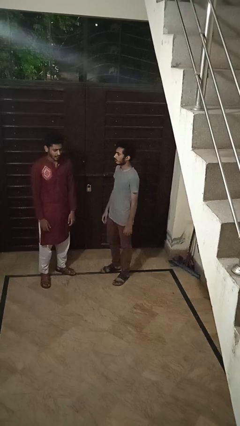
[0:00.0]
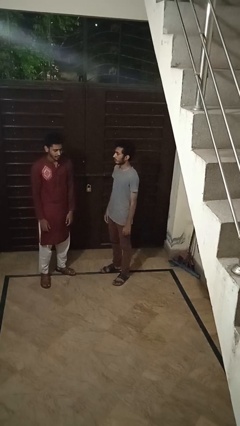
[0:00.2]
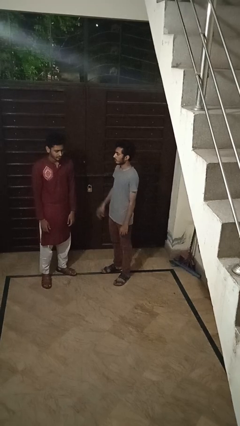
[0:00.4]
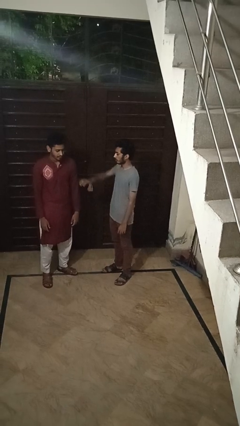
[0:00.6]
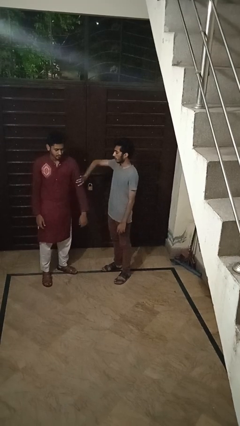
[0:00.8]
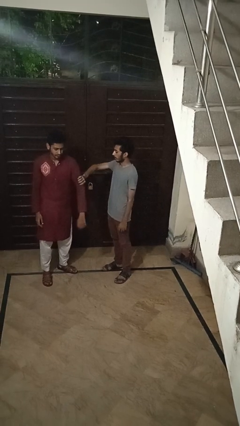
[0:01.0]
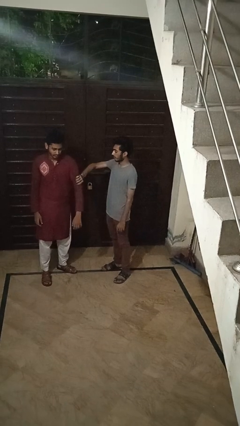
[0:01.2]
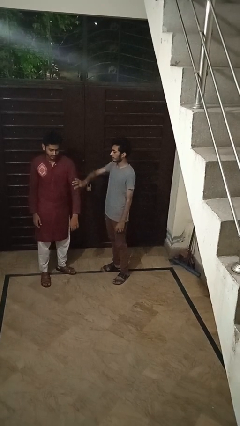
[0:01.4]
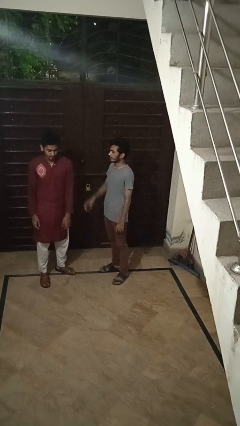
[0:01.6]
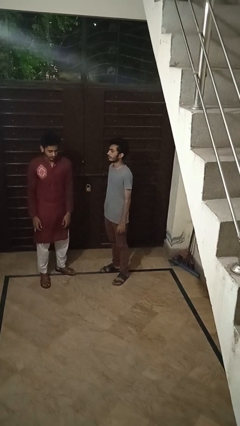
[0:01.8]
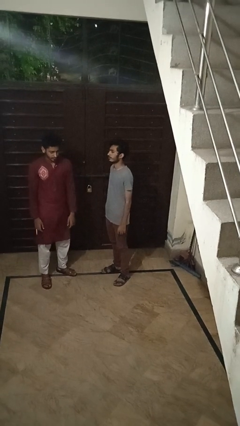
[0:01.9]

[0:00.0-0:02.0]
person grabs person by bicep

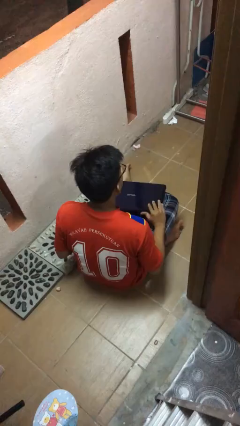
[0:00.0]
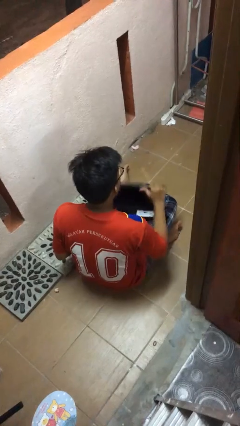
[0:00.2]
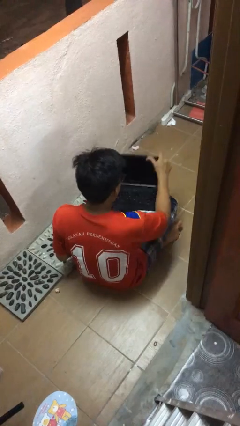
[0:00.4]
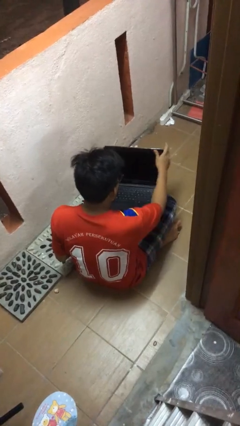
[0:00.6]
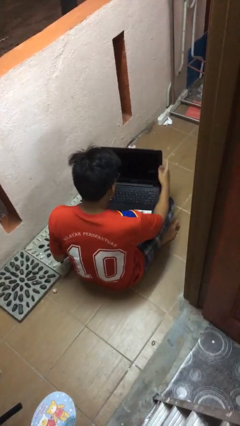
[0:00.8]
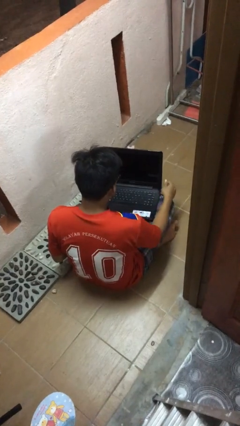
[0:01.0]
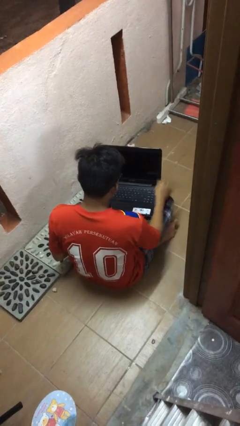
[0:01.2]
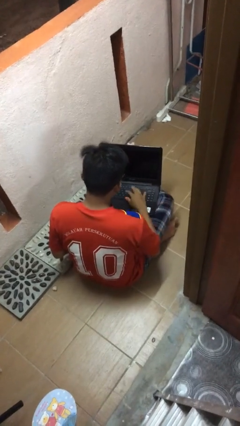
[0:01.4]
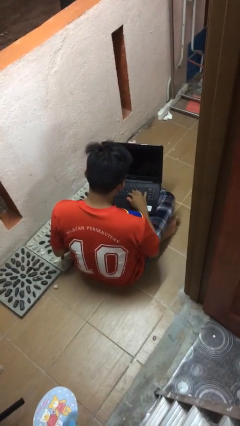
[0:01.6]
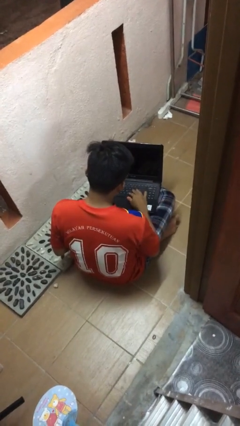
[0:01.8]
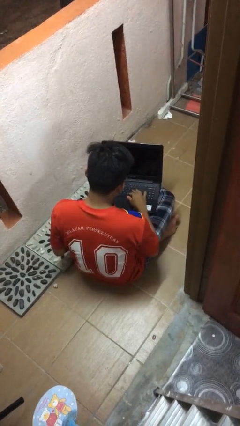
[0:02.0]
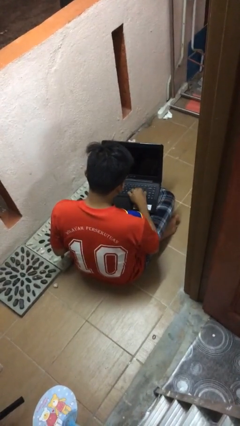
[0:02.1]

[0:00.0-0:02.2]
person opens laptop

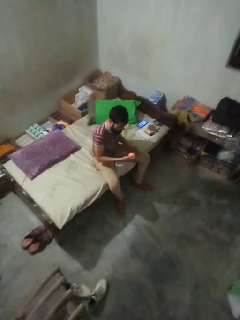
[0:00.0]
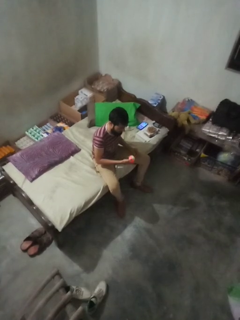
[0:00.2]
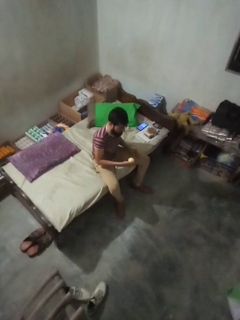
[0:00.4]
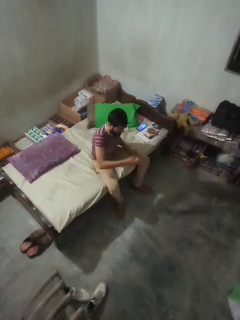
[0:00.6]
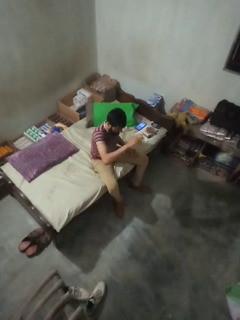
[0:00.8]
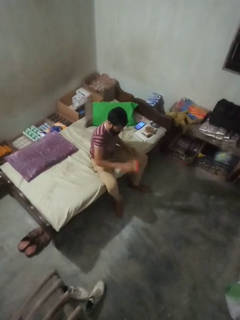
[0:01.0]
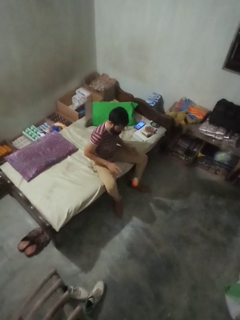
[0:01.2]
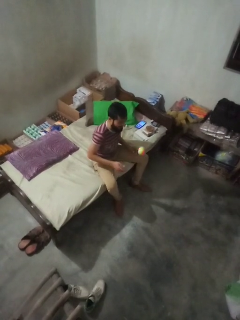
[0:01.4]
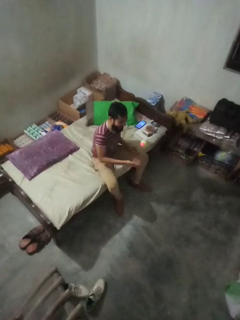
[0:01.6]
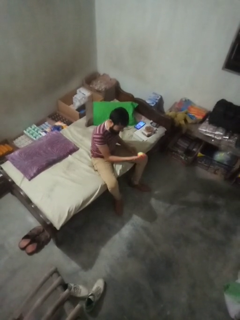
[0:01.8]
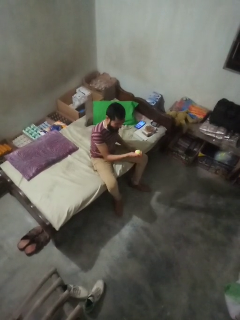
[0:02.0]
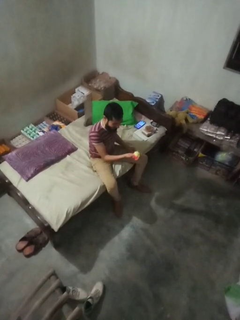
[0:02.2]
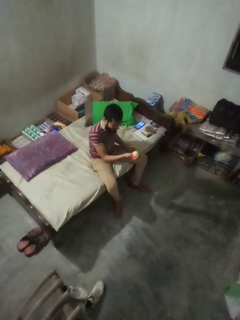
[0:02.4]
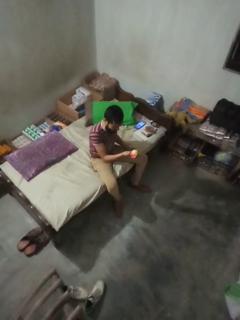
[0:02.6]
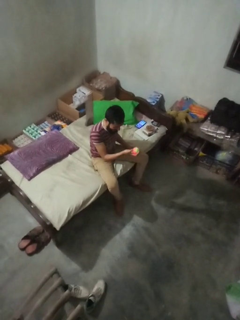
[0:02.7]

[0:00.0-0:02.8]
person bounces ball on floor

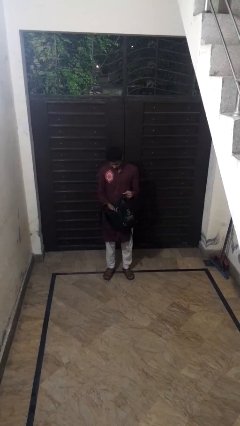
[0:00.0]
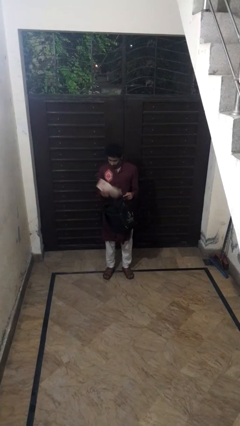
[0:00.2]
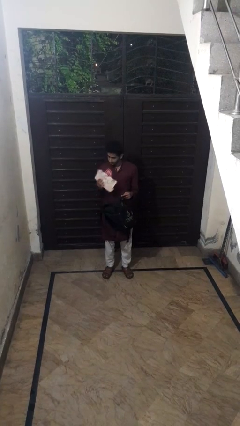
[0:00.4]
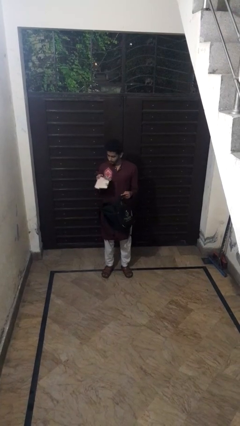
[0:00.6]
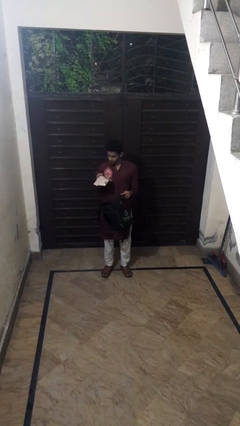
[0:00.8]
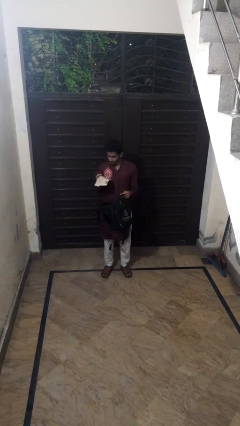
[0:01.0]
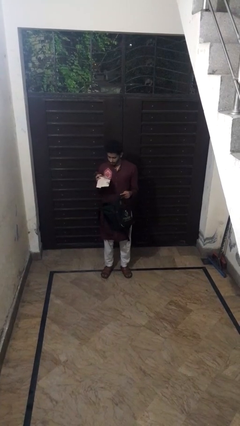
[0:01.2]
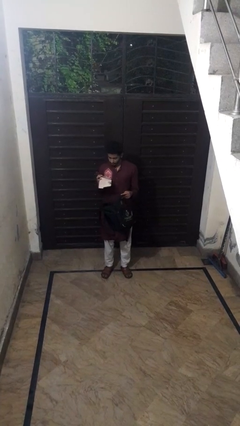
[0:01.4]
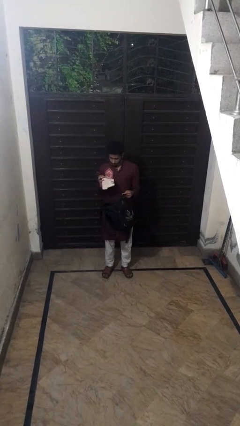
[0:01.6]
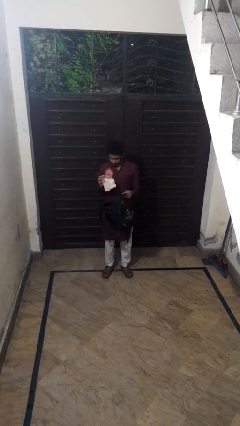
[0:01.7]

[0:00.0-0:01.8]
person takes object from backpack

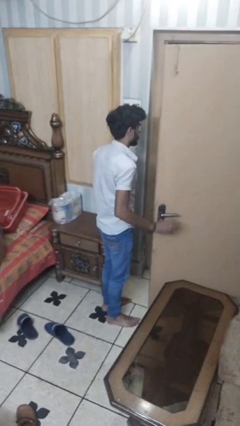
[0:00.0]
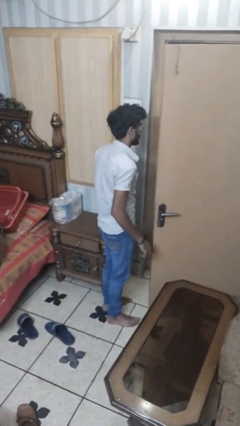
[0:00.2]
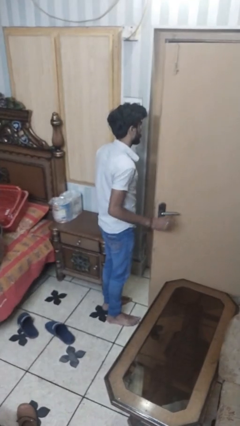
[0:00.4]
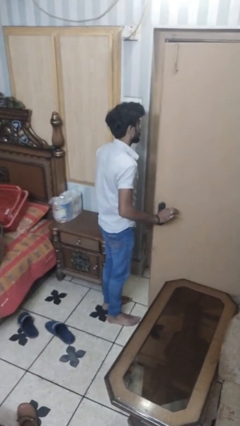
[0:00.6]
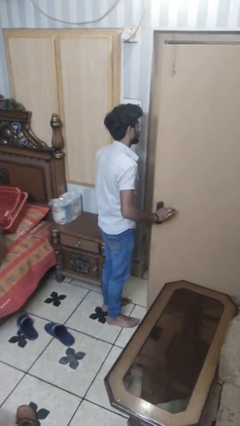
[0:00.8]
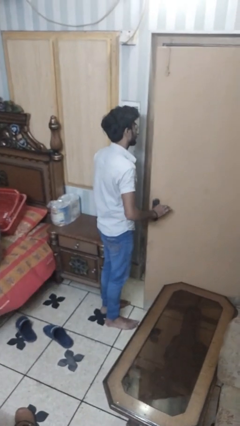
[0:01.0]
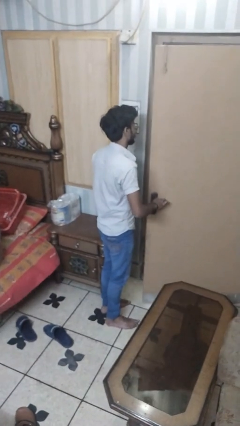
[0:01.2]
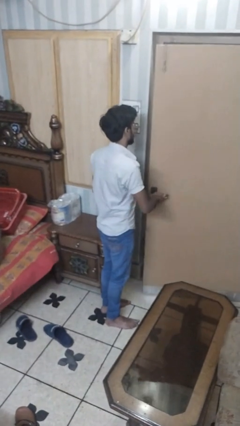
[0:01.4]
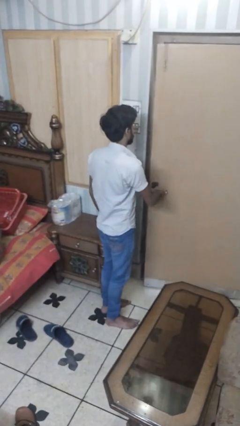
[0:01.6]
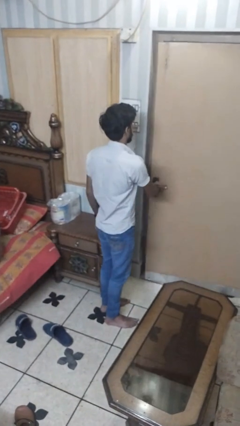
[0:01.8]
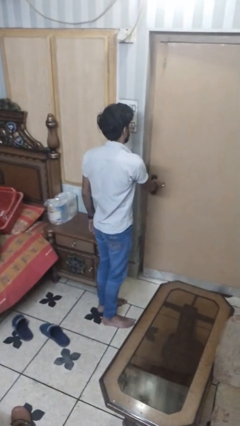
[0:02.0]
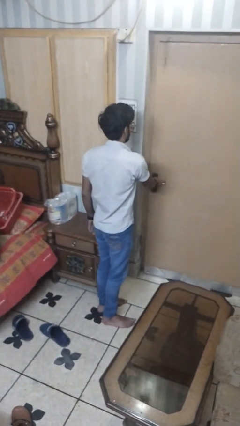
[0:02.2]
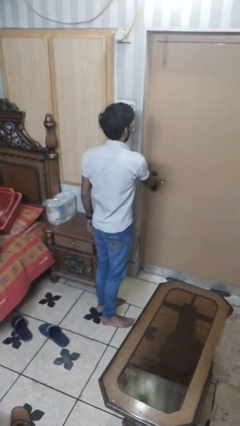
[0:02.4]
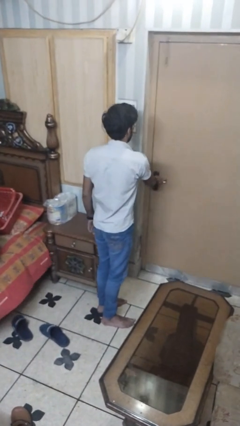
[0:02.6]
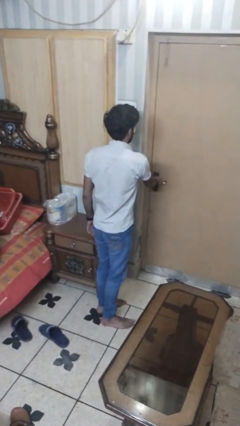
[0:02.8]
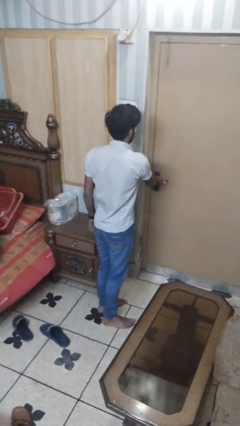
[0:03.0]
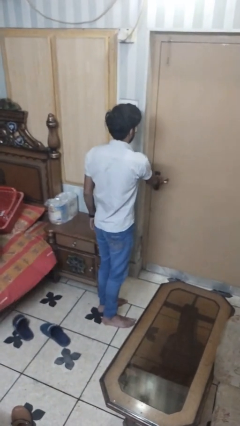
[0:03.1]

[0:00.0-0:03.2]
person closes closet door

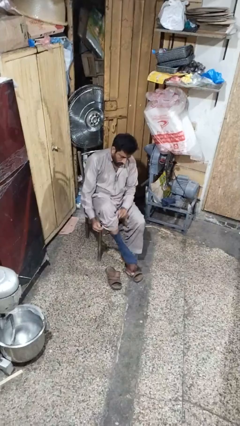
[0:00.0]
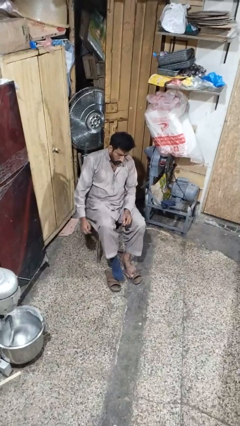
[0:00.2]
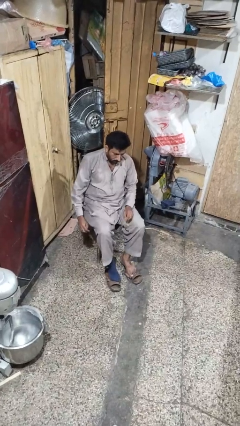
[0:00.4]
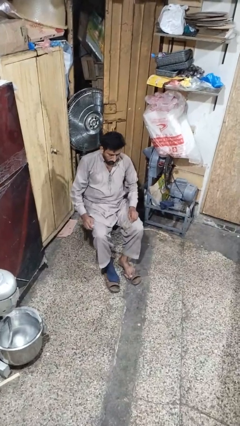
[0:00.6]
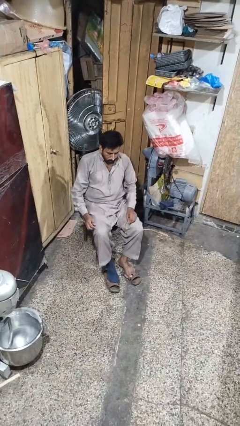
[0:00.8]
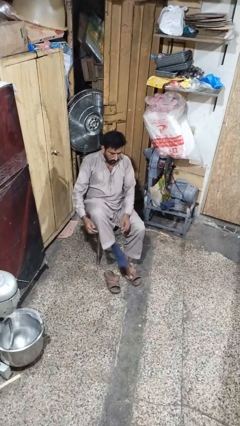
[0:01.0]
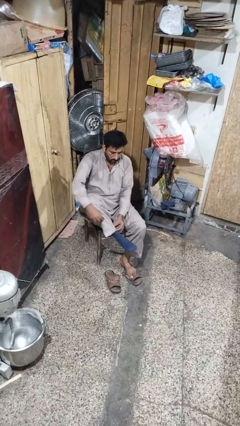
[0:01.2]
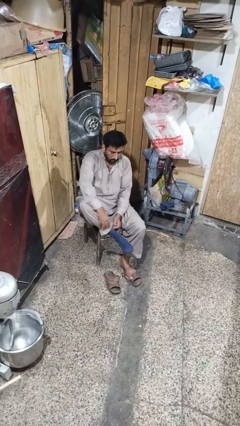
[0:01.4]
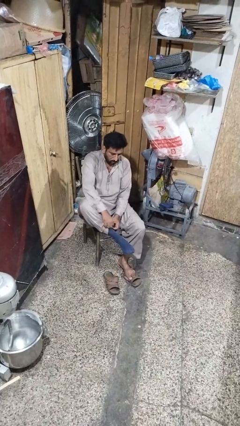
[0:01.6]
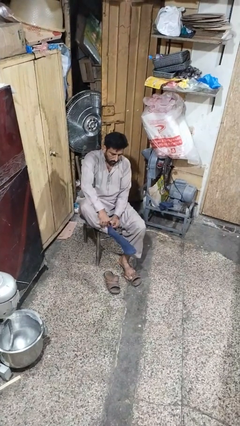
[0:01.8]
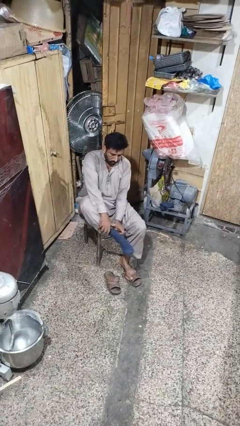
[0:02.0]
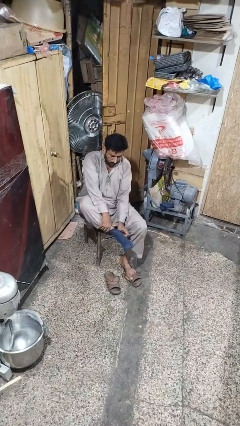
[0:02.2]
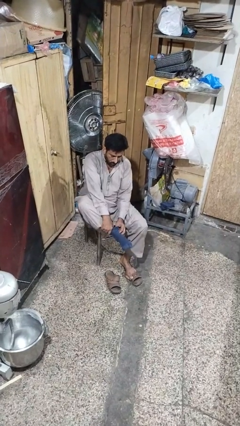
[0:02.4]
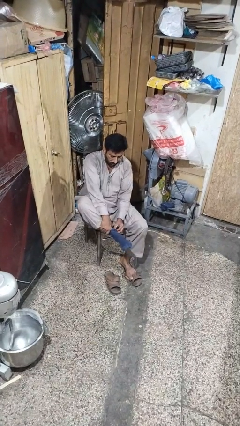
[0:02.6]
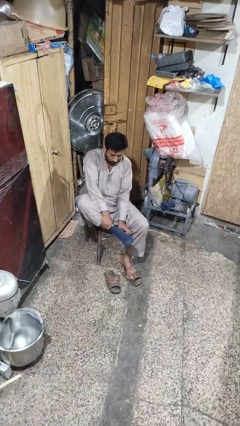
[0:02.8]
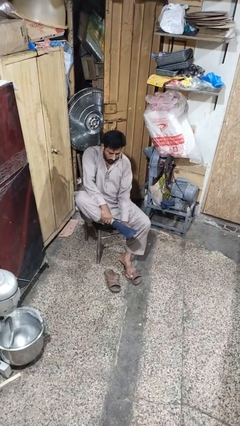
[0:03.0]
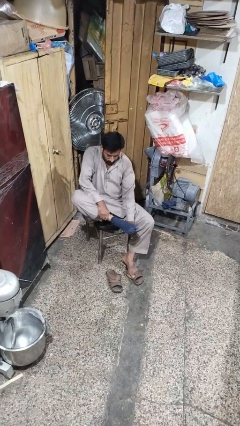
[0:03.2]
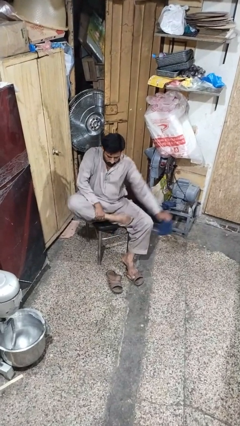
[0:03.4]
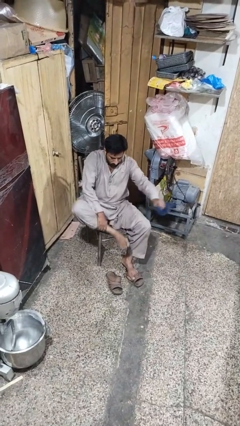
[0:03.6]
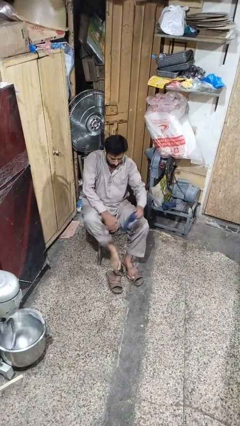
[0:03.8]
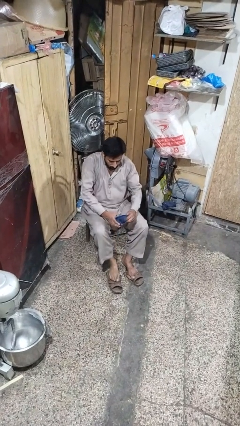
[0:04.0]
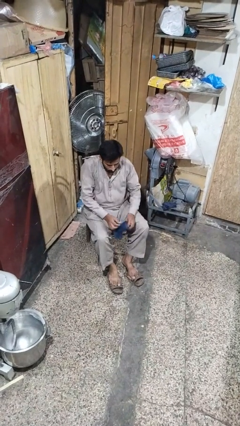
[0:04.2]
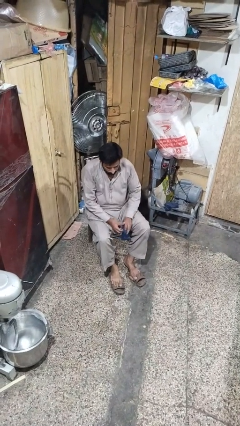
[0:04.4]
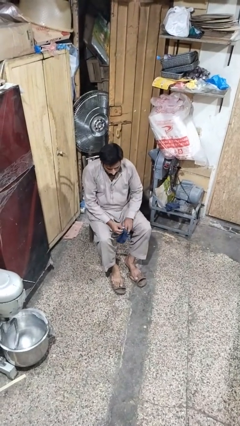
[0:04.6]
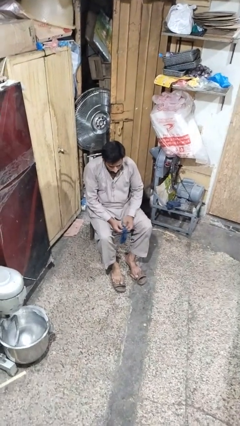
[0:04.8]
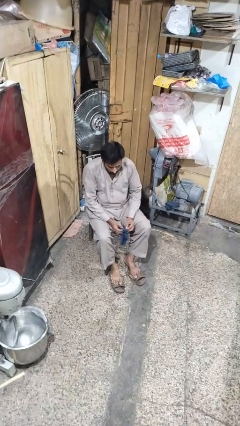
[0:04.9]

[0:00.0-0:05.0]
person takes off socks

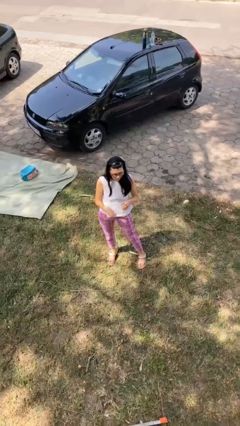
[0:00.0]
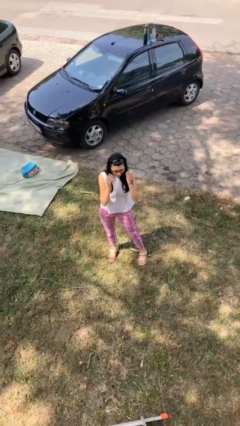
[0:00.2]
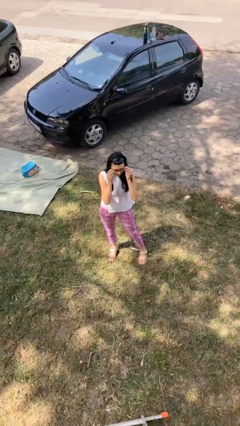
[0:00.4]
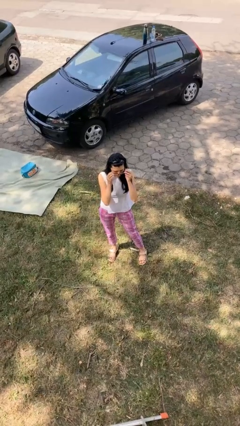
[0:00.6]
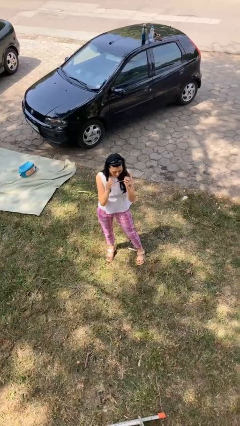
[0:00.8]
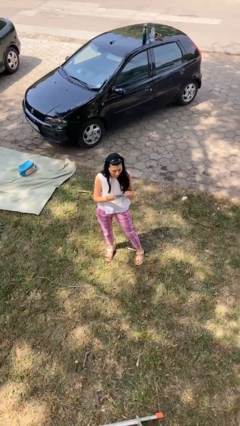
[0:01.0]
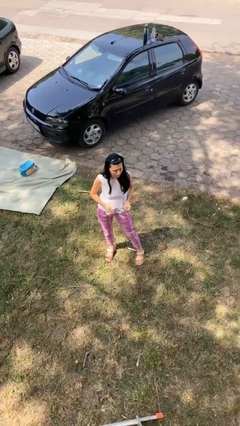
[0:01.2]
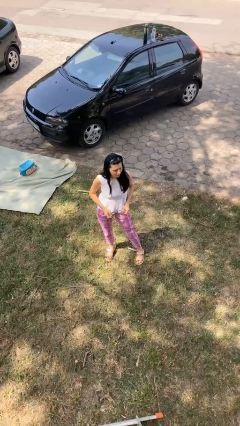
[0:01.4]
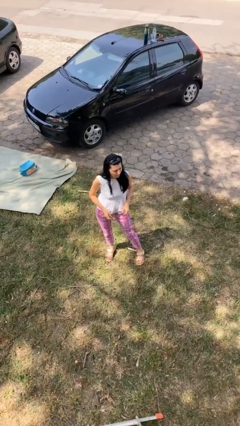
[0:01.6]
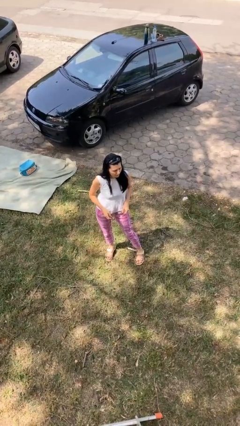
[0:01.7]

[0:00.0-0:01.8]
person takes off glasses
